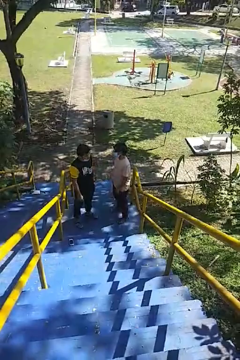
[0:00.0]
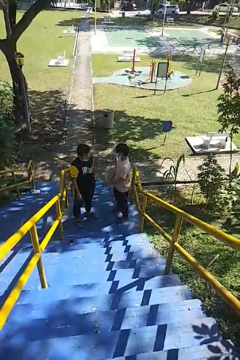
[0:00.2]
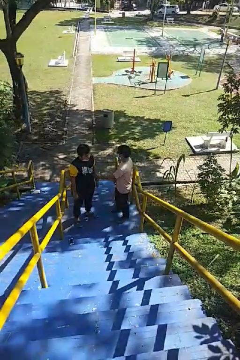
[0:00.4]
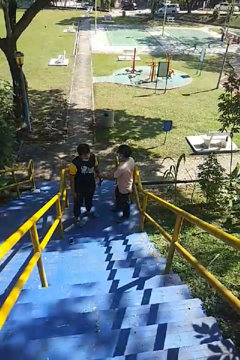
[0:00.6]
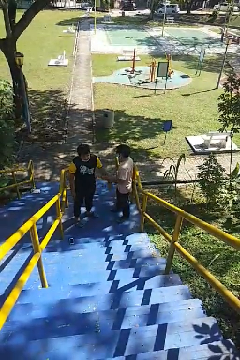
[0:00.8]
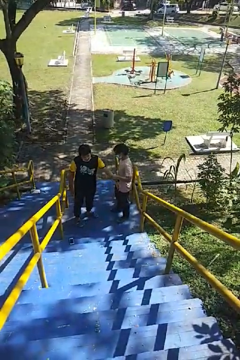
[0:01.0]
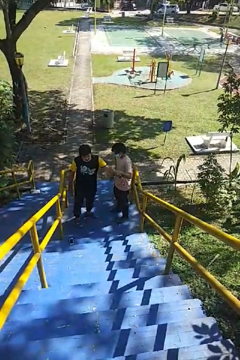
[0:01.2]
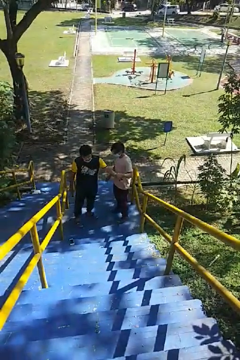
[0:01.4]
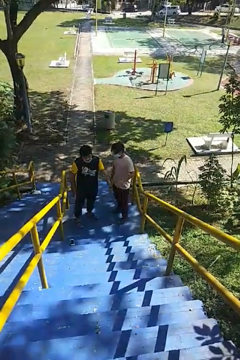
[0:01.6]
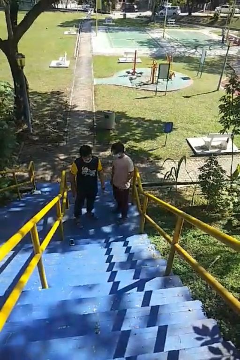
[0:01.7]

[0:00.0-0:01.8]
person grabs person by forearm

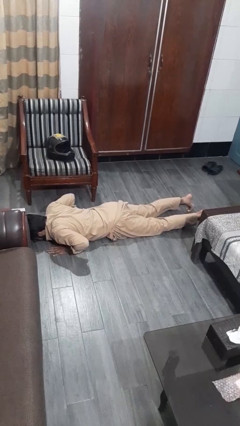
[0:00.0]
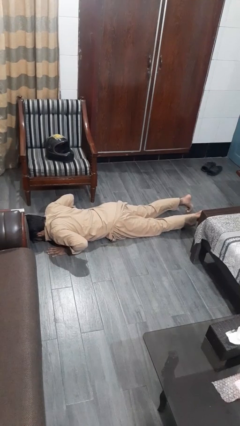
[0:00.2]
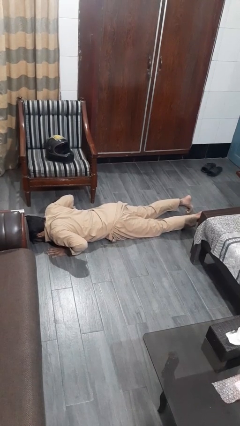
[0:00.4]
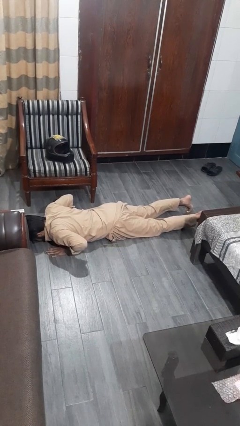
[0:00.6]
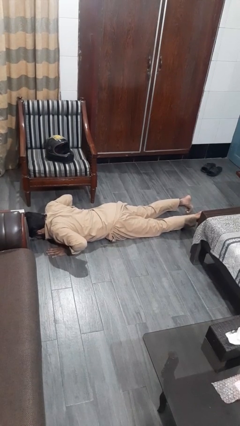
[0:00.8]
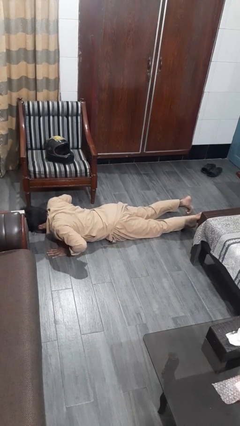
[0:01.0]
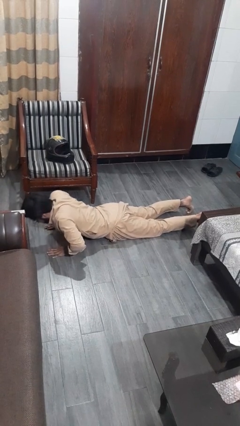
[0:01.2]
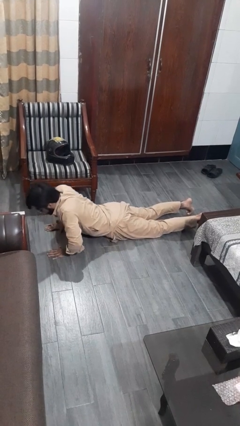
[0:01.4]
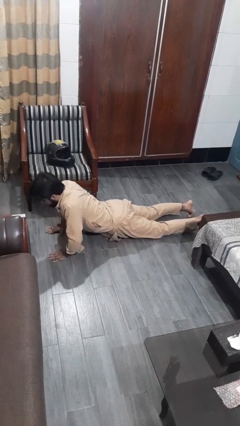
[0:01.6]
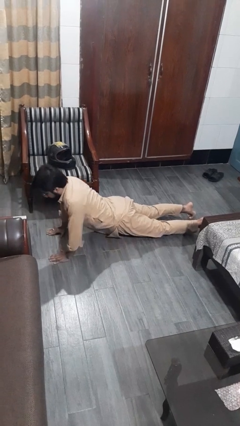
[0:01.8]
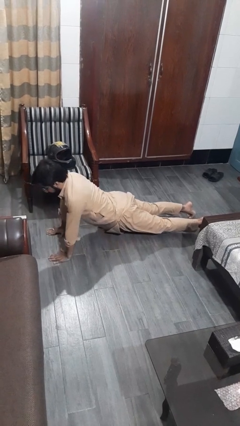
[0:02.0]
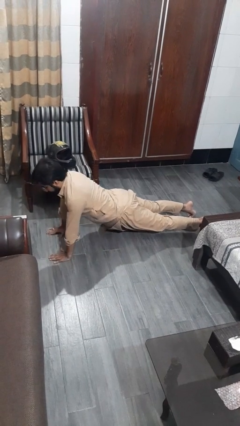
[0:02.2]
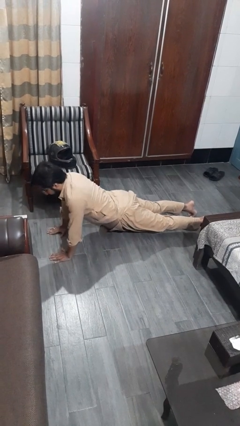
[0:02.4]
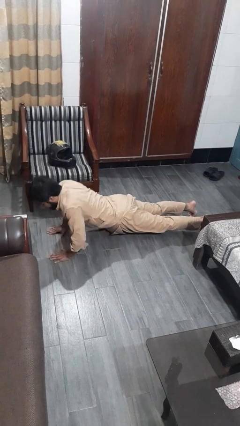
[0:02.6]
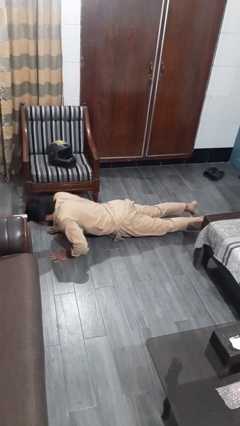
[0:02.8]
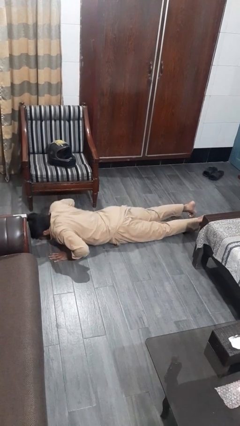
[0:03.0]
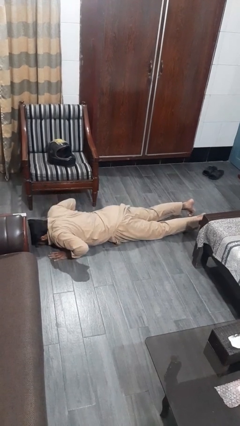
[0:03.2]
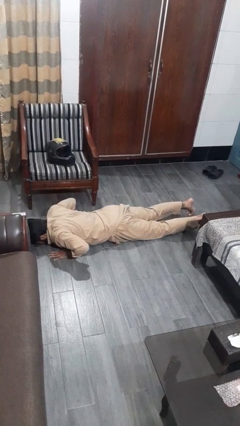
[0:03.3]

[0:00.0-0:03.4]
person exercises with pushup

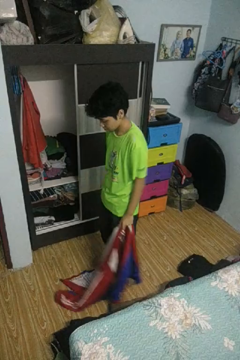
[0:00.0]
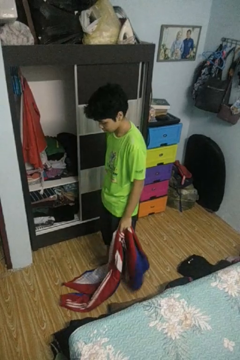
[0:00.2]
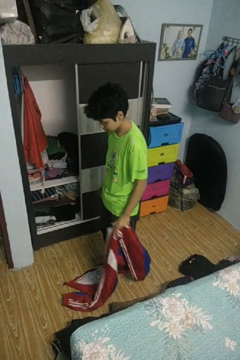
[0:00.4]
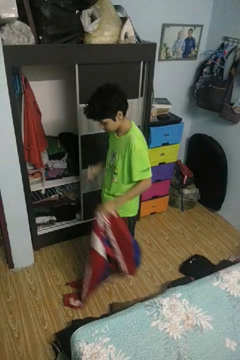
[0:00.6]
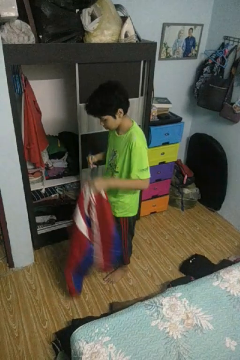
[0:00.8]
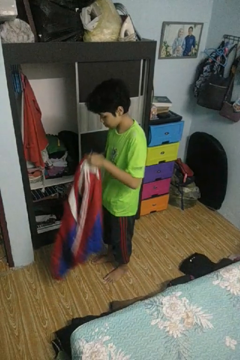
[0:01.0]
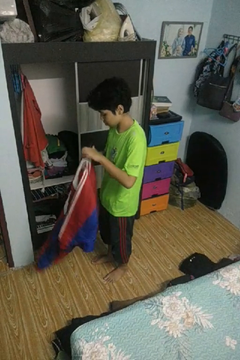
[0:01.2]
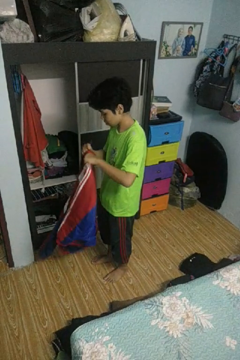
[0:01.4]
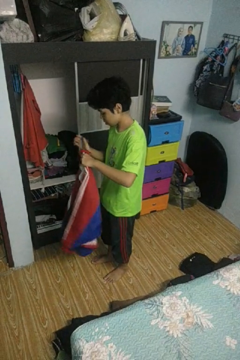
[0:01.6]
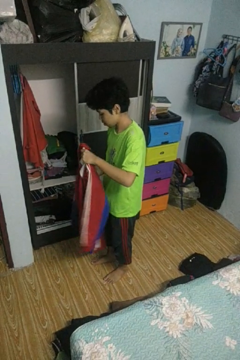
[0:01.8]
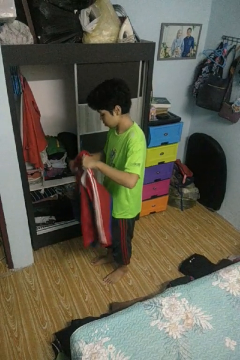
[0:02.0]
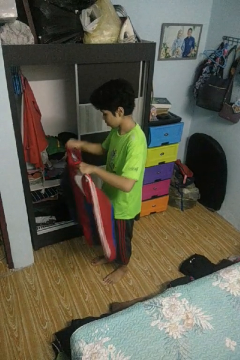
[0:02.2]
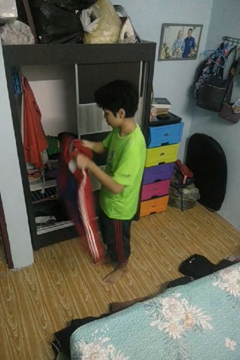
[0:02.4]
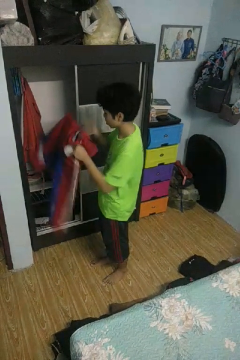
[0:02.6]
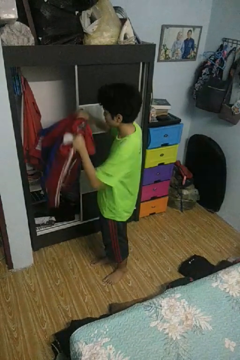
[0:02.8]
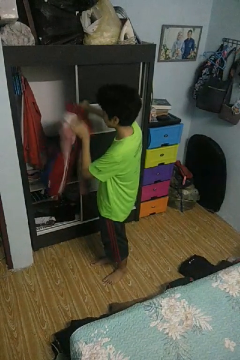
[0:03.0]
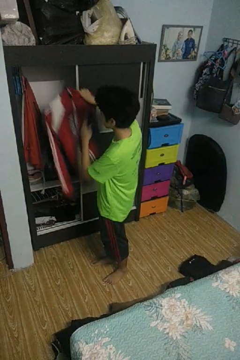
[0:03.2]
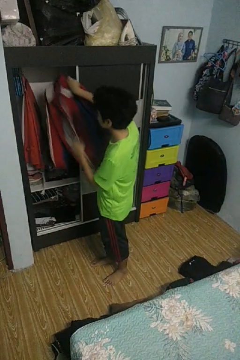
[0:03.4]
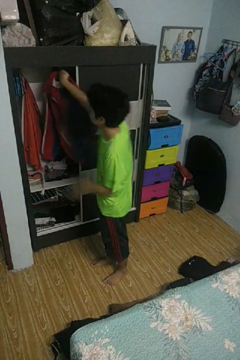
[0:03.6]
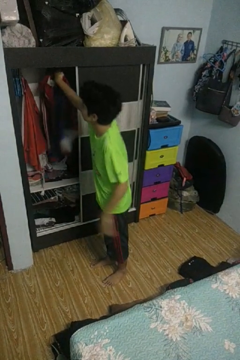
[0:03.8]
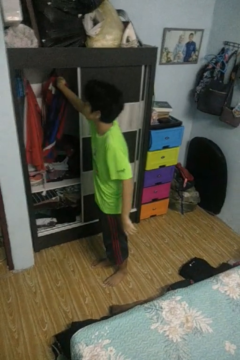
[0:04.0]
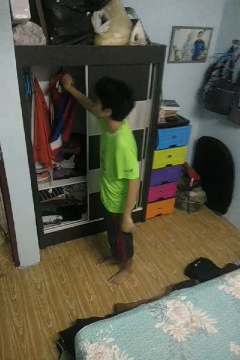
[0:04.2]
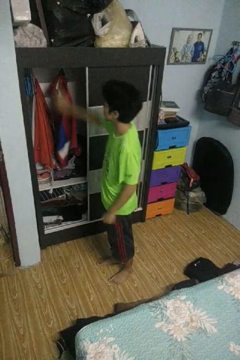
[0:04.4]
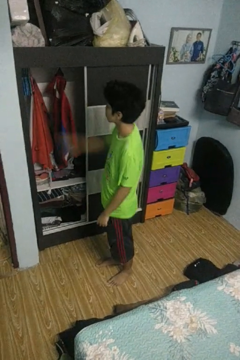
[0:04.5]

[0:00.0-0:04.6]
person puts clothes into closet

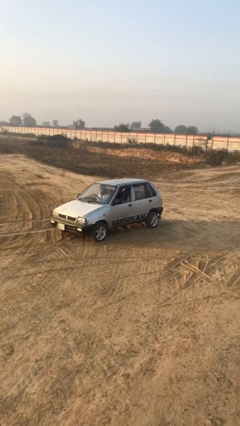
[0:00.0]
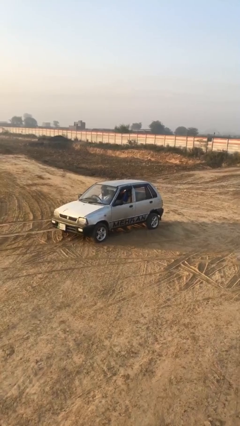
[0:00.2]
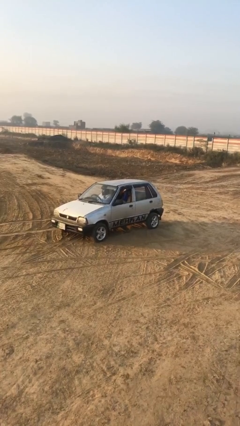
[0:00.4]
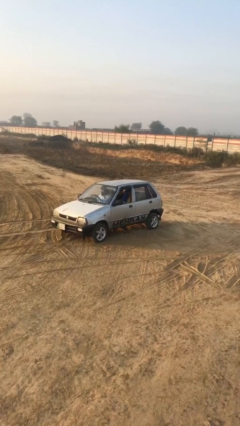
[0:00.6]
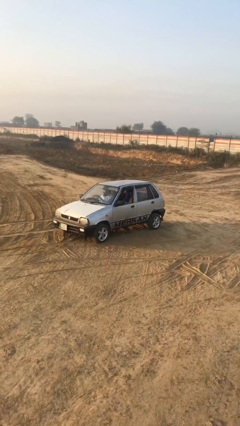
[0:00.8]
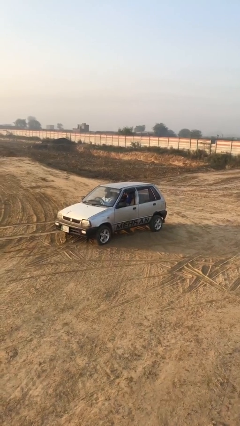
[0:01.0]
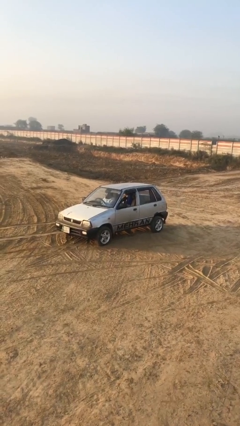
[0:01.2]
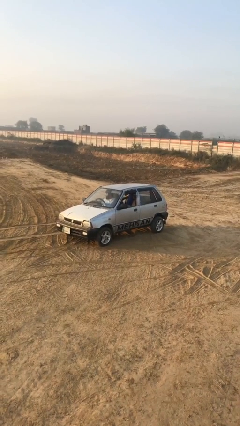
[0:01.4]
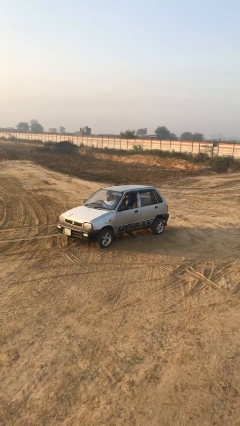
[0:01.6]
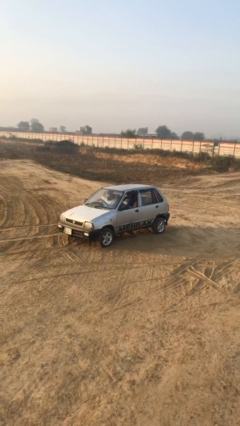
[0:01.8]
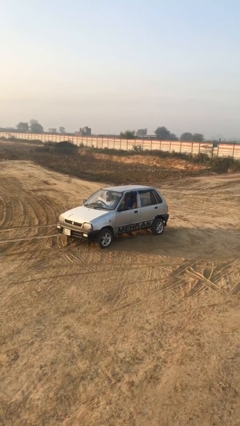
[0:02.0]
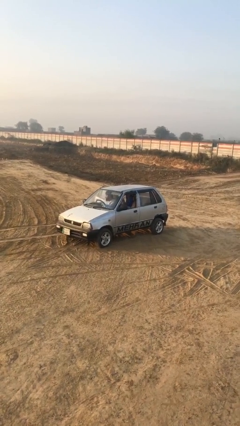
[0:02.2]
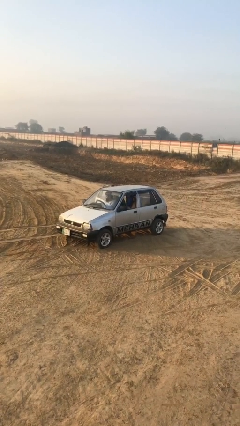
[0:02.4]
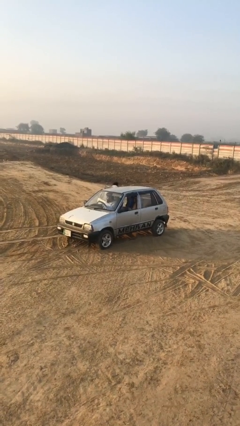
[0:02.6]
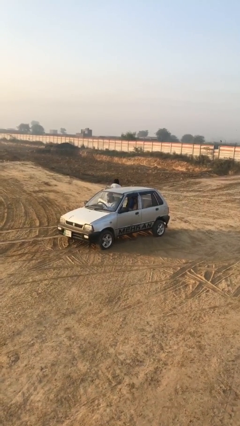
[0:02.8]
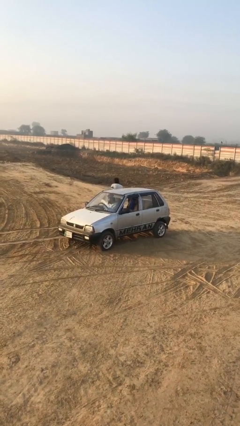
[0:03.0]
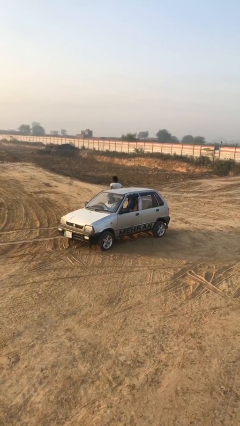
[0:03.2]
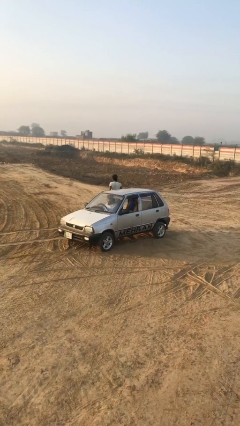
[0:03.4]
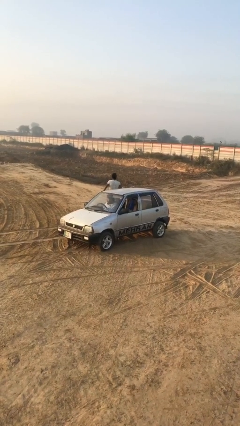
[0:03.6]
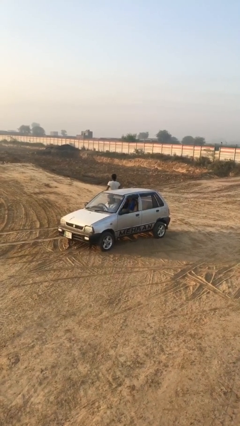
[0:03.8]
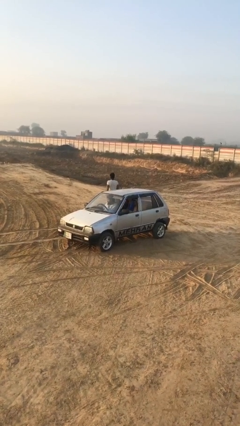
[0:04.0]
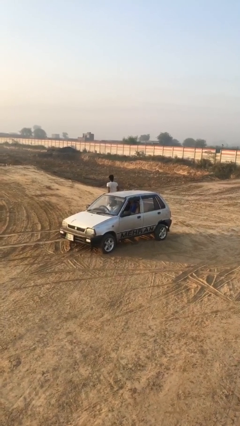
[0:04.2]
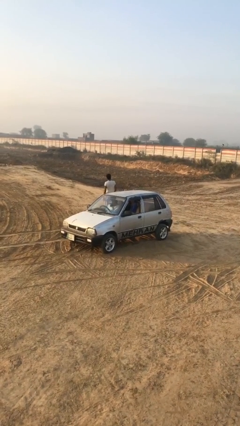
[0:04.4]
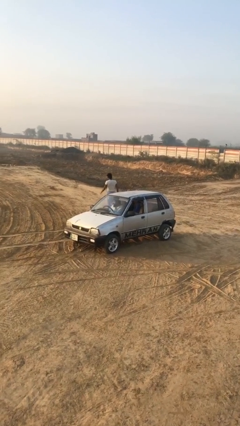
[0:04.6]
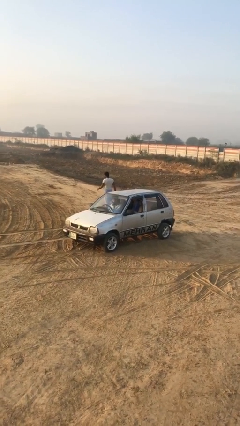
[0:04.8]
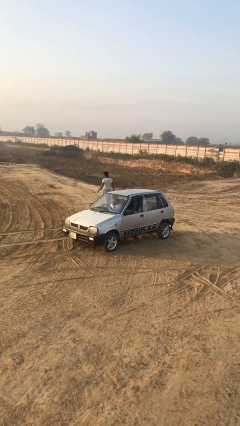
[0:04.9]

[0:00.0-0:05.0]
car drops off person

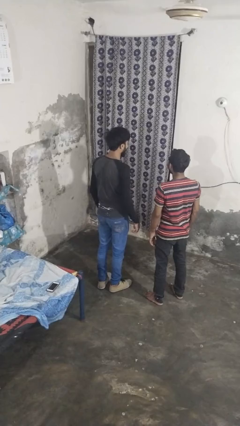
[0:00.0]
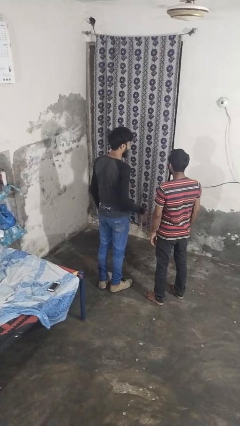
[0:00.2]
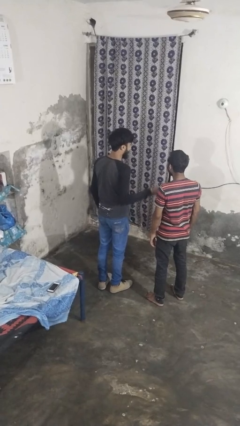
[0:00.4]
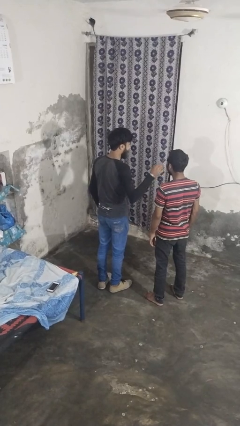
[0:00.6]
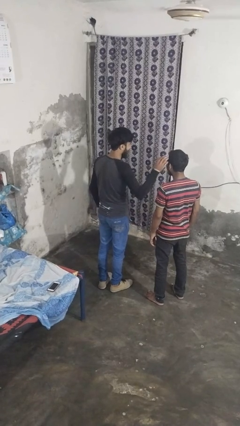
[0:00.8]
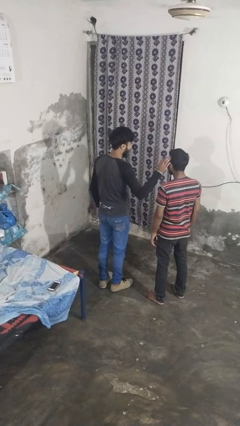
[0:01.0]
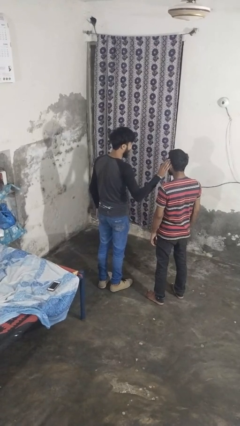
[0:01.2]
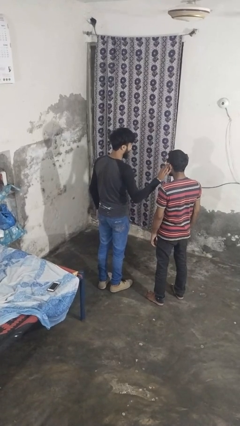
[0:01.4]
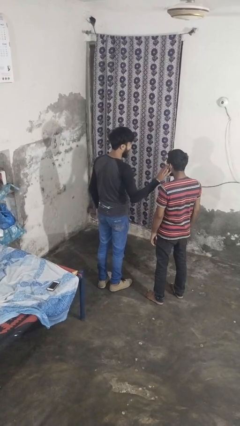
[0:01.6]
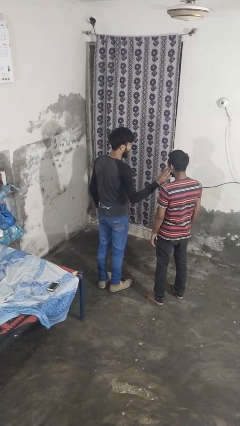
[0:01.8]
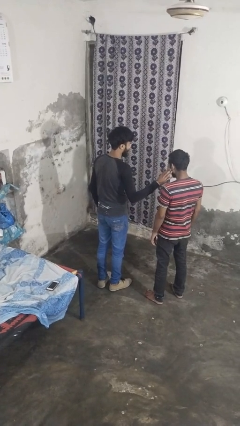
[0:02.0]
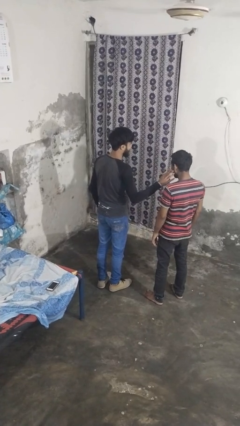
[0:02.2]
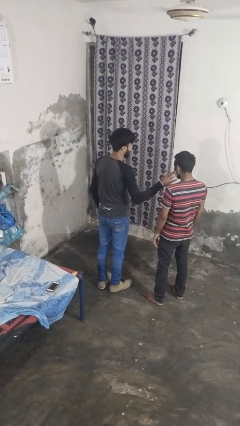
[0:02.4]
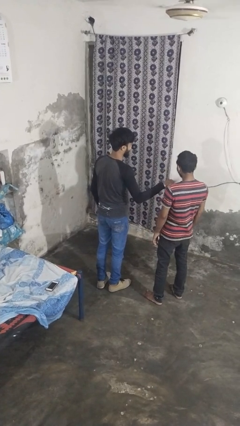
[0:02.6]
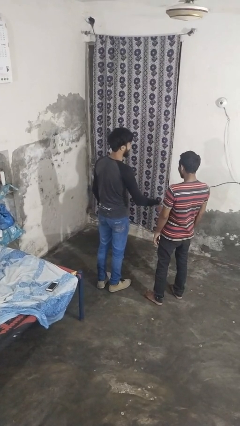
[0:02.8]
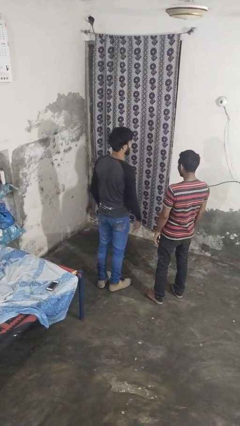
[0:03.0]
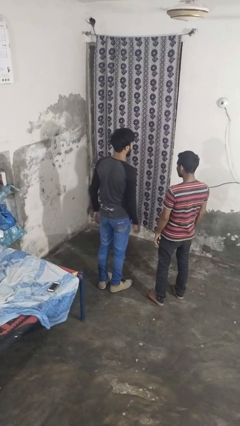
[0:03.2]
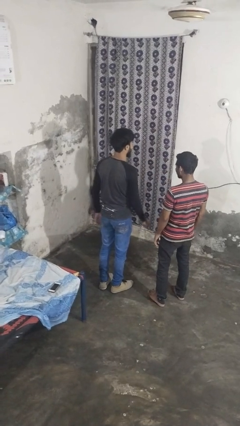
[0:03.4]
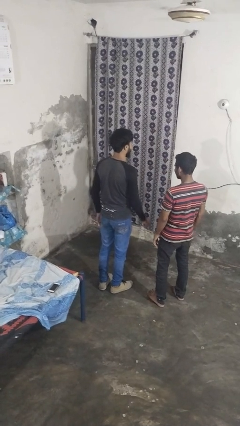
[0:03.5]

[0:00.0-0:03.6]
person touches face of person
